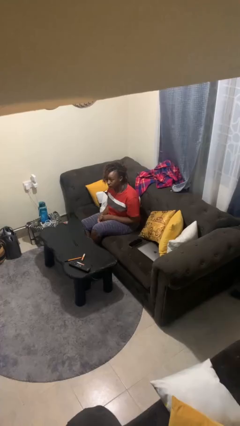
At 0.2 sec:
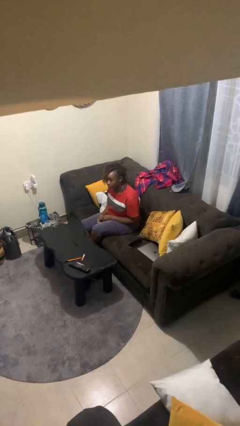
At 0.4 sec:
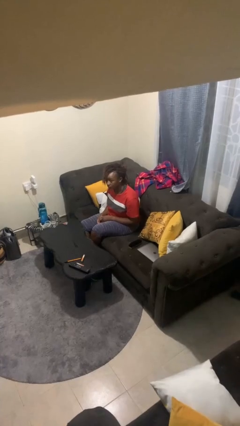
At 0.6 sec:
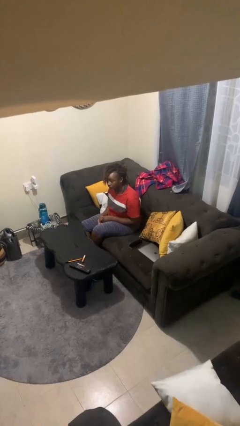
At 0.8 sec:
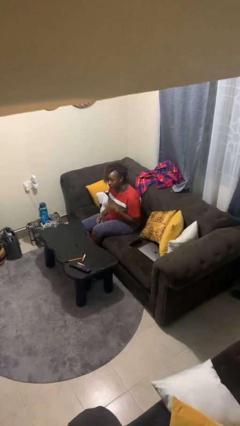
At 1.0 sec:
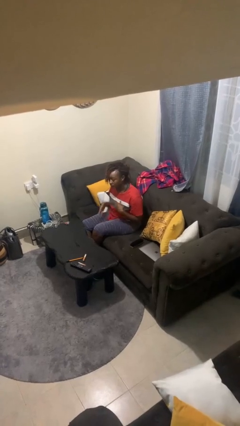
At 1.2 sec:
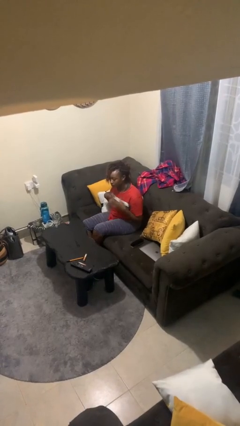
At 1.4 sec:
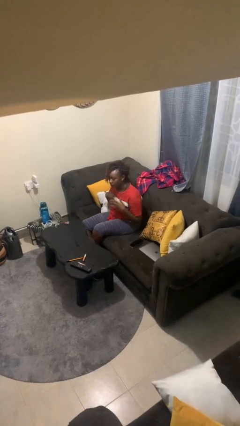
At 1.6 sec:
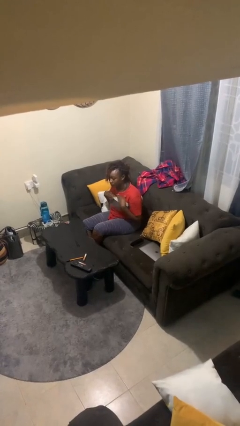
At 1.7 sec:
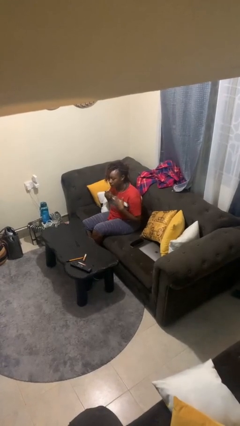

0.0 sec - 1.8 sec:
person drums on chest

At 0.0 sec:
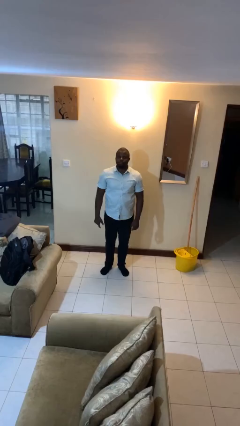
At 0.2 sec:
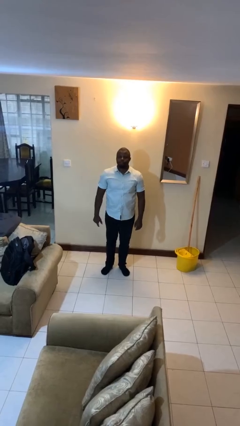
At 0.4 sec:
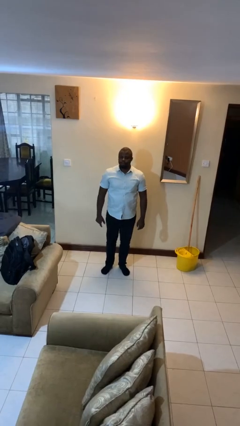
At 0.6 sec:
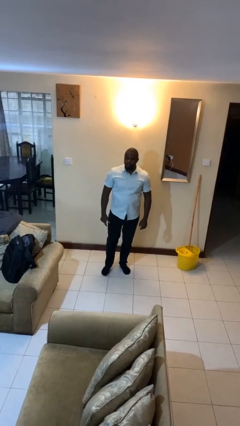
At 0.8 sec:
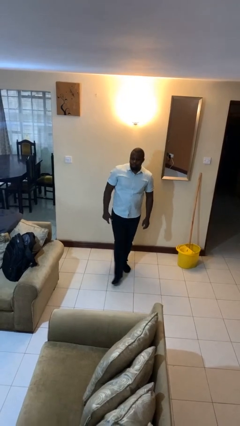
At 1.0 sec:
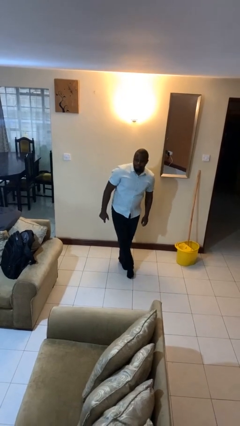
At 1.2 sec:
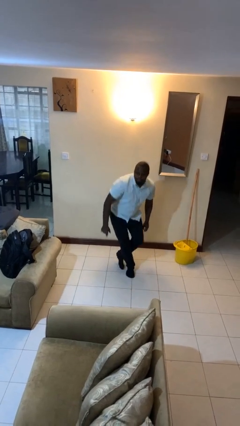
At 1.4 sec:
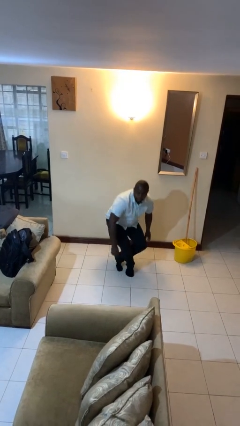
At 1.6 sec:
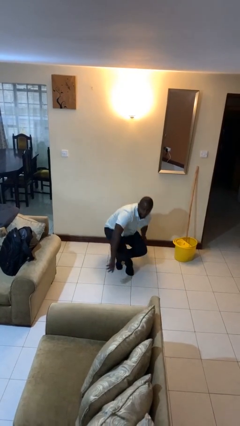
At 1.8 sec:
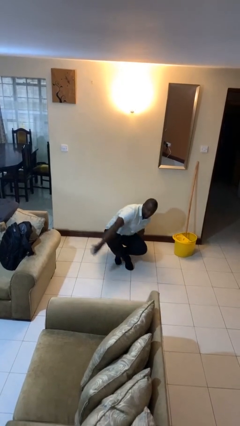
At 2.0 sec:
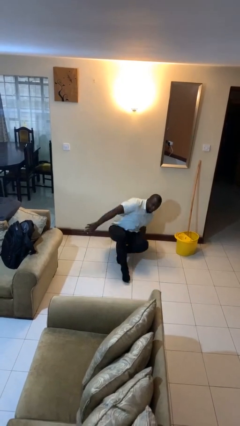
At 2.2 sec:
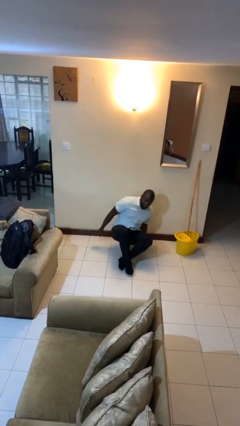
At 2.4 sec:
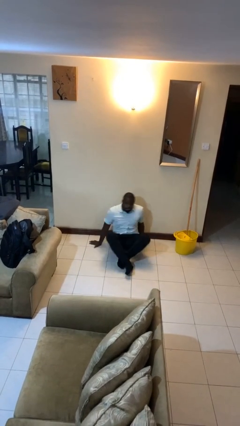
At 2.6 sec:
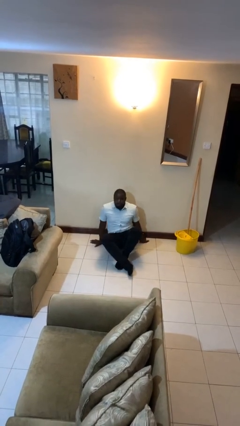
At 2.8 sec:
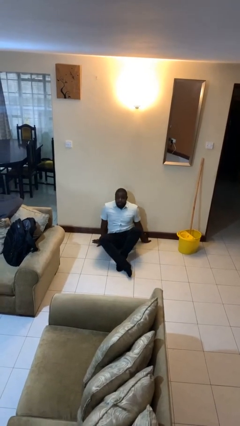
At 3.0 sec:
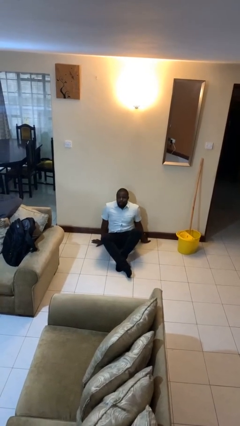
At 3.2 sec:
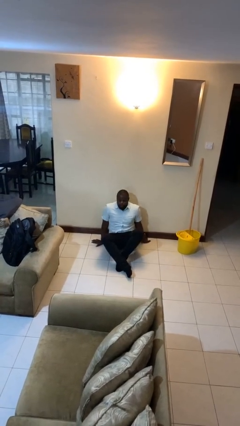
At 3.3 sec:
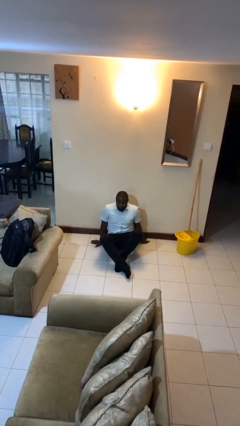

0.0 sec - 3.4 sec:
person sits crisscross

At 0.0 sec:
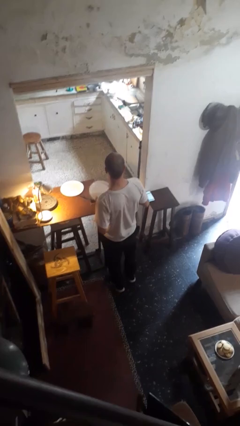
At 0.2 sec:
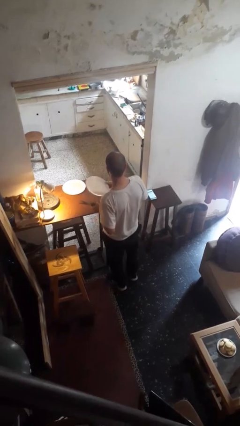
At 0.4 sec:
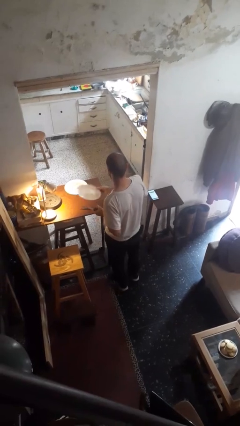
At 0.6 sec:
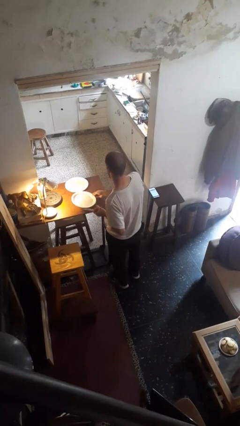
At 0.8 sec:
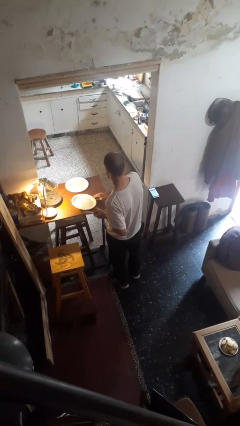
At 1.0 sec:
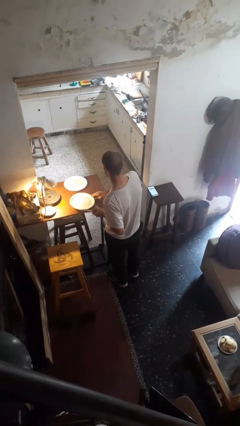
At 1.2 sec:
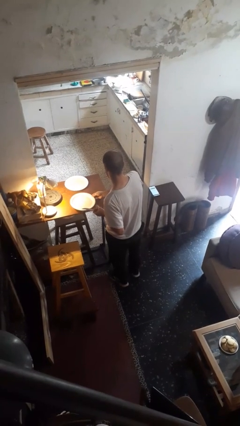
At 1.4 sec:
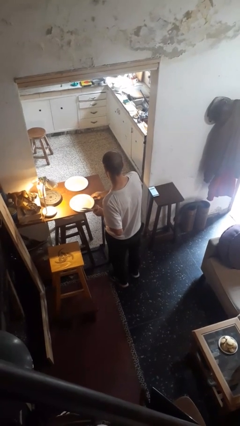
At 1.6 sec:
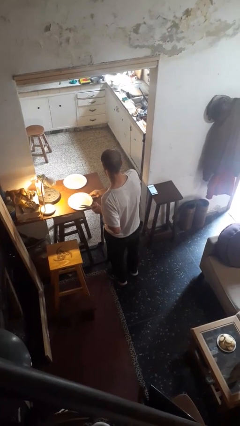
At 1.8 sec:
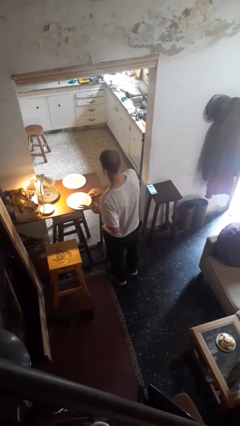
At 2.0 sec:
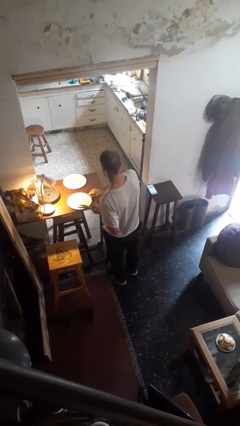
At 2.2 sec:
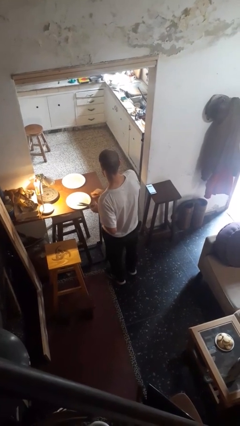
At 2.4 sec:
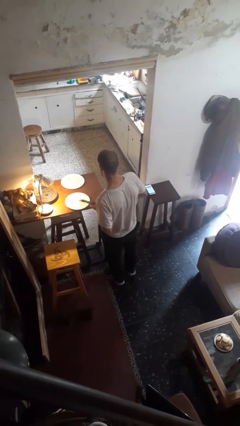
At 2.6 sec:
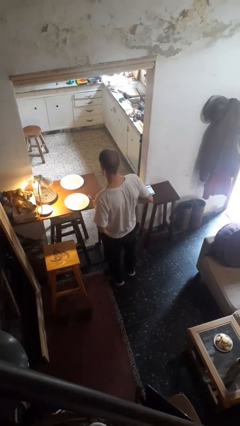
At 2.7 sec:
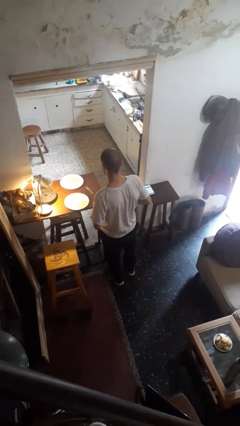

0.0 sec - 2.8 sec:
person sets table

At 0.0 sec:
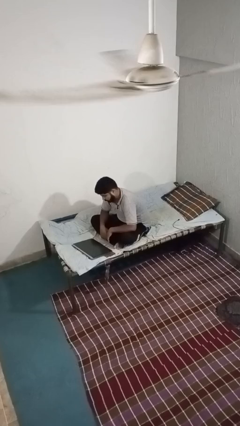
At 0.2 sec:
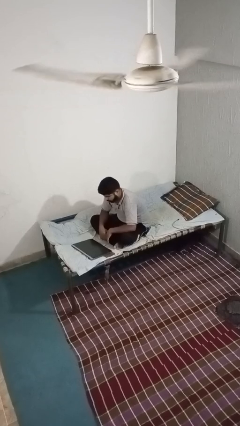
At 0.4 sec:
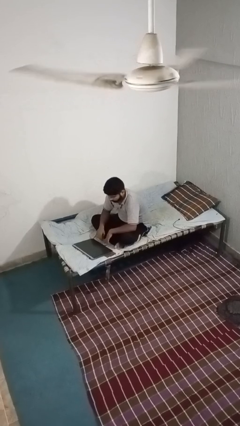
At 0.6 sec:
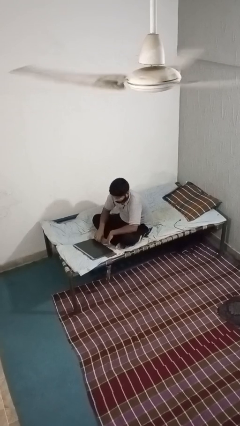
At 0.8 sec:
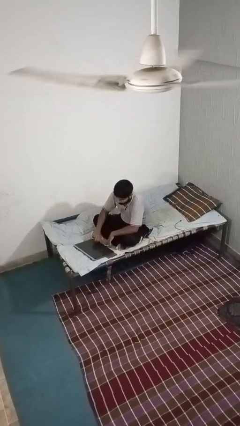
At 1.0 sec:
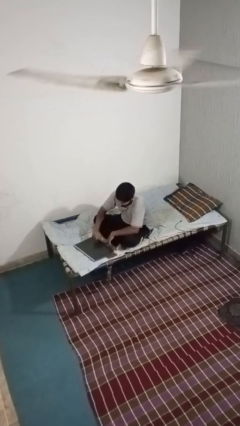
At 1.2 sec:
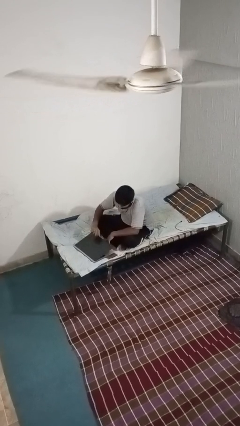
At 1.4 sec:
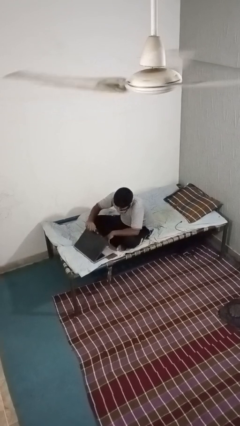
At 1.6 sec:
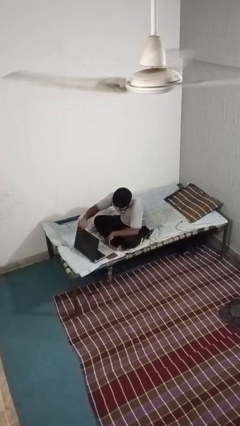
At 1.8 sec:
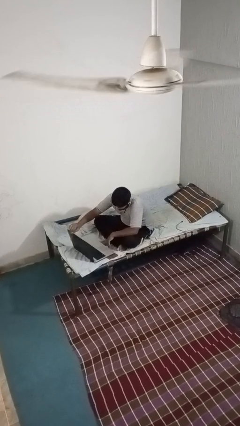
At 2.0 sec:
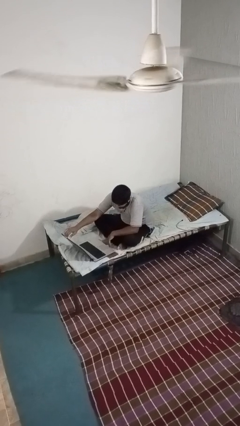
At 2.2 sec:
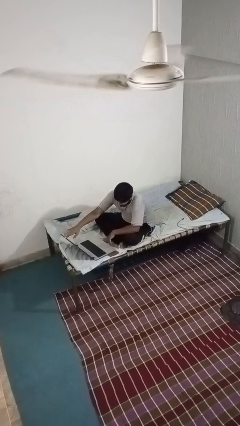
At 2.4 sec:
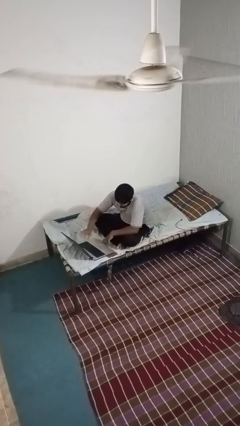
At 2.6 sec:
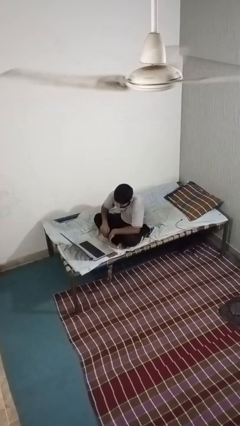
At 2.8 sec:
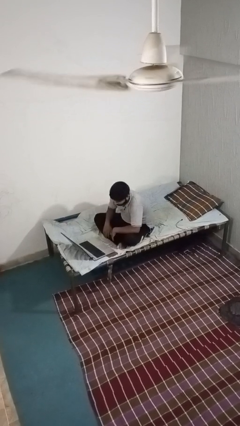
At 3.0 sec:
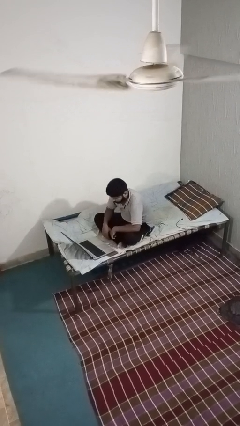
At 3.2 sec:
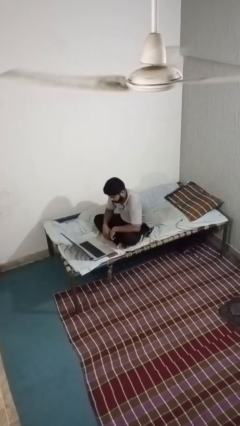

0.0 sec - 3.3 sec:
person opens laptop

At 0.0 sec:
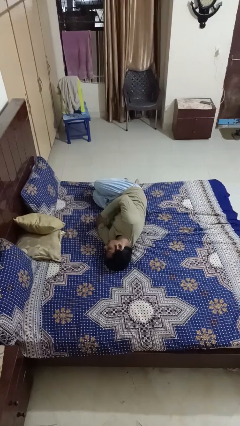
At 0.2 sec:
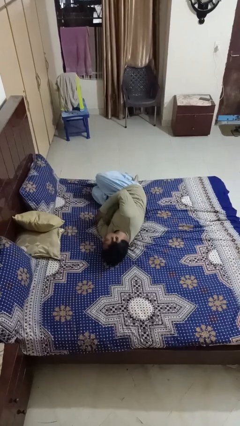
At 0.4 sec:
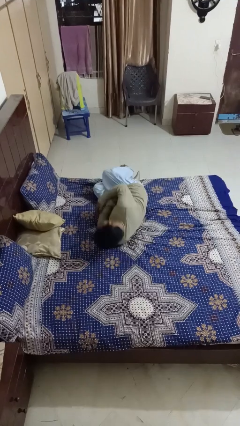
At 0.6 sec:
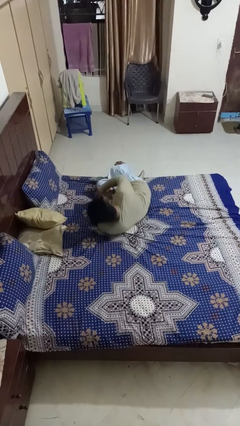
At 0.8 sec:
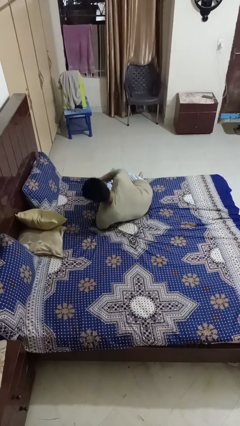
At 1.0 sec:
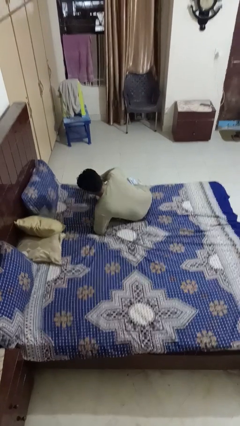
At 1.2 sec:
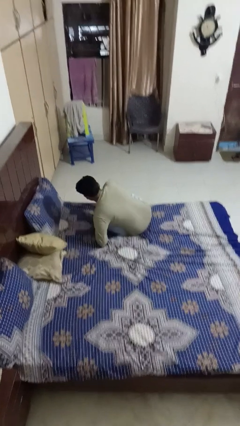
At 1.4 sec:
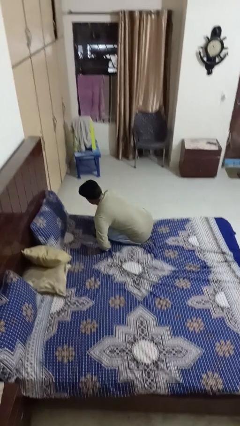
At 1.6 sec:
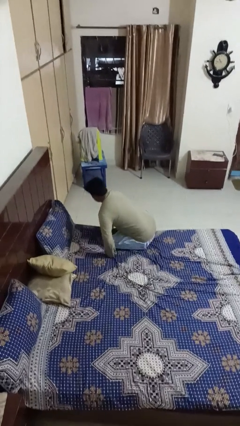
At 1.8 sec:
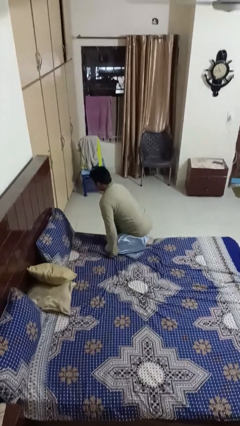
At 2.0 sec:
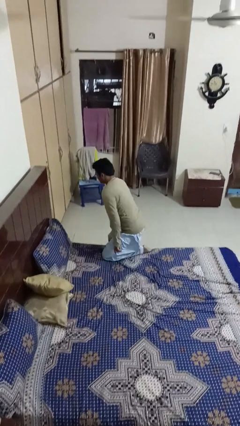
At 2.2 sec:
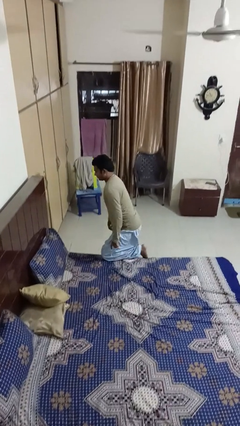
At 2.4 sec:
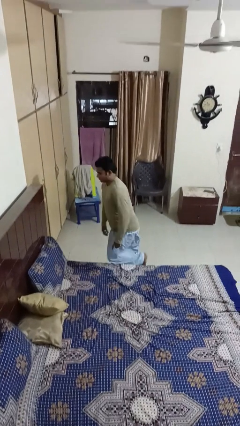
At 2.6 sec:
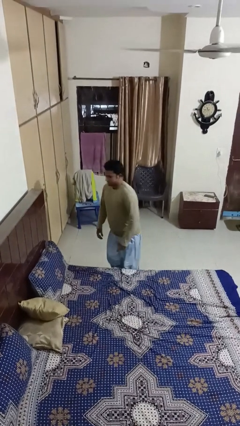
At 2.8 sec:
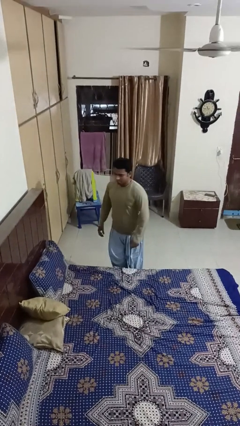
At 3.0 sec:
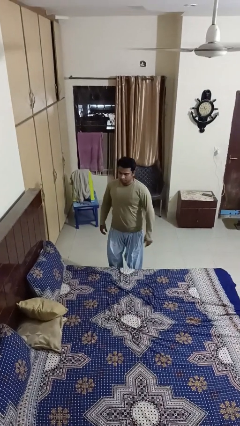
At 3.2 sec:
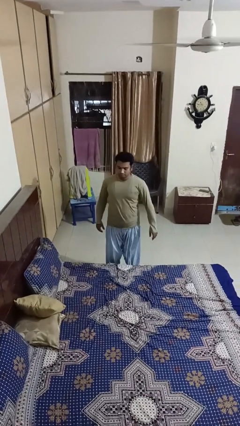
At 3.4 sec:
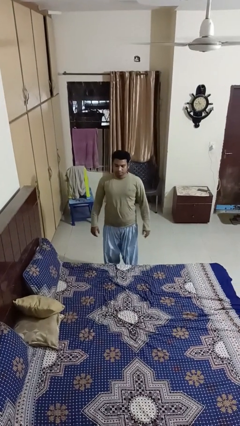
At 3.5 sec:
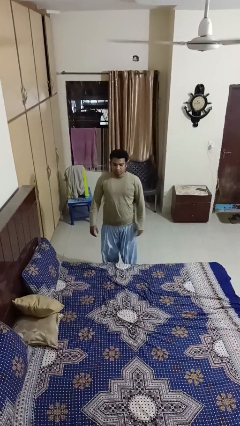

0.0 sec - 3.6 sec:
person stands up

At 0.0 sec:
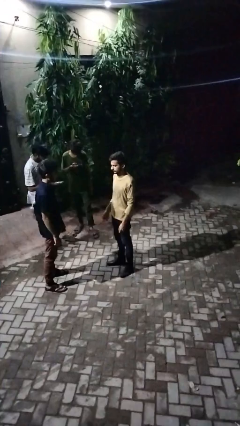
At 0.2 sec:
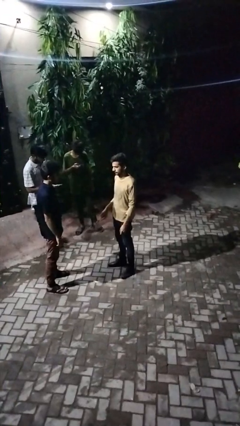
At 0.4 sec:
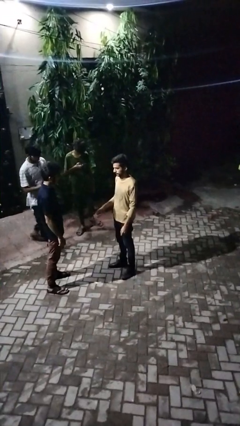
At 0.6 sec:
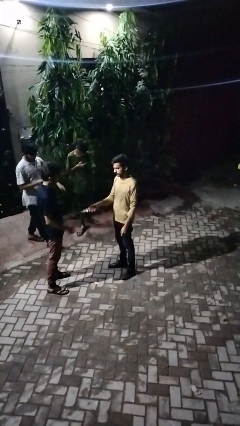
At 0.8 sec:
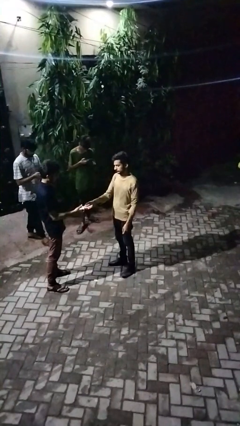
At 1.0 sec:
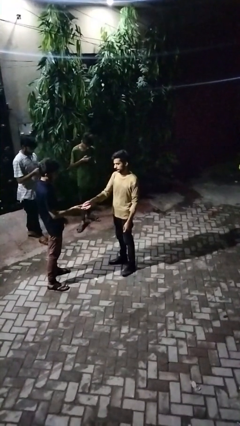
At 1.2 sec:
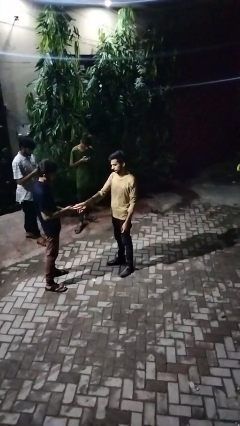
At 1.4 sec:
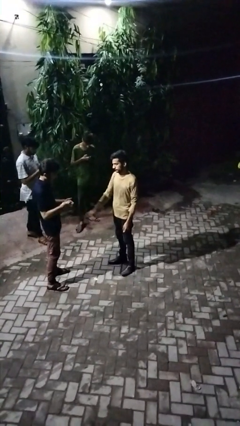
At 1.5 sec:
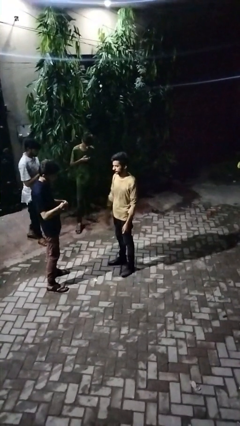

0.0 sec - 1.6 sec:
person transfers object to person

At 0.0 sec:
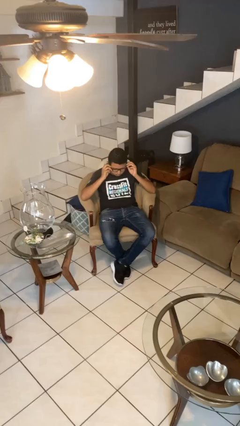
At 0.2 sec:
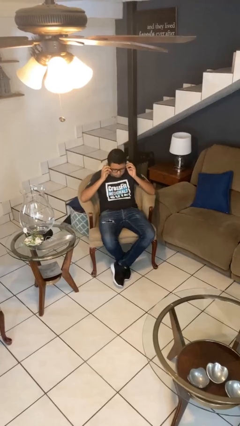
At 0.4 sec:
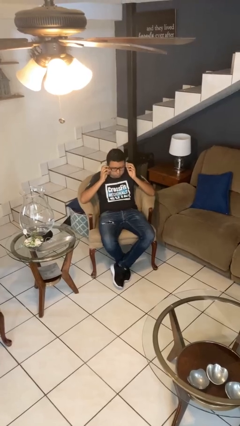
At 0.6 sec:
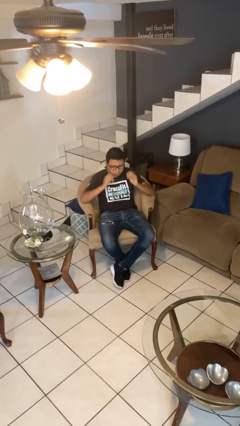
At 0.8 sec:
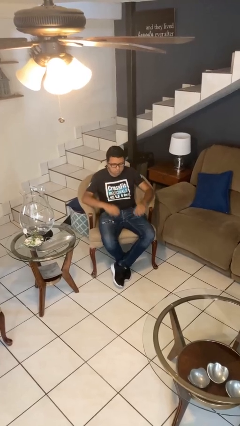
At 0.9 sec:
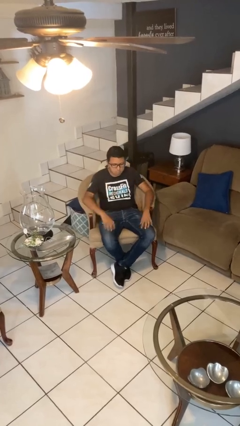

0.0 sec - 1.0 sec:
person puts on glasses
